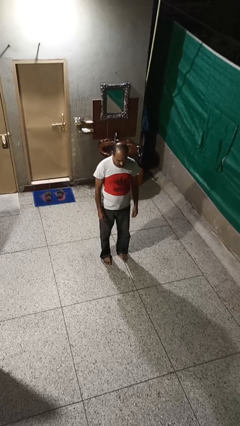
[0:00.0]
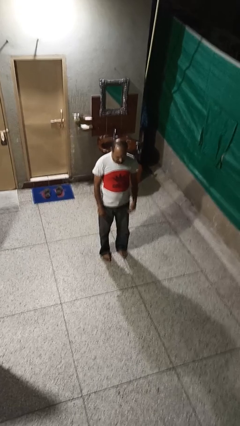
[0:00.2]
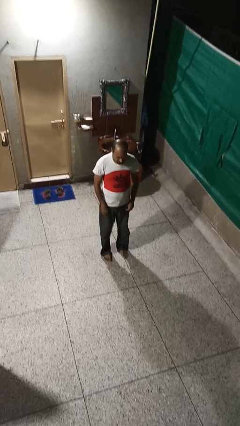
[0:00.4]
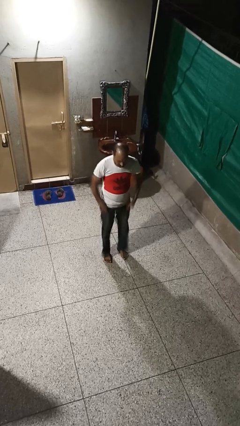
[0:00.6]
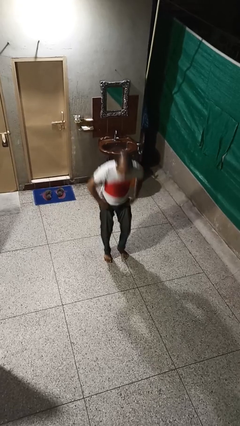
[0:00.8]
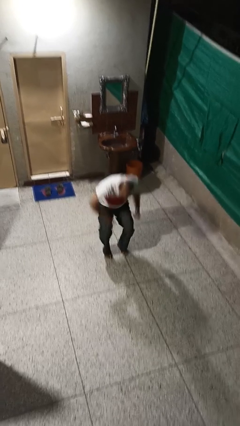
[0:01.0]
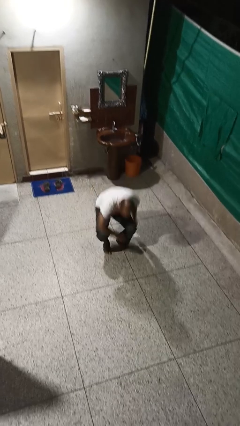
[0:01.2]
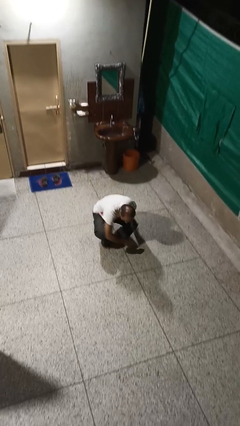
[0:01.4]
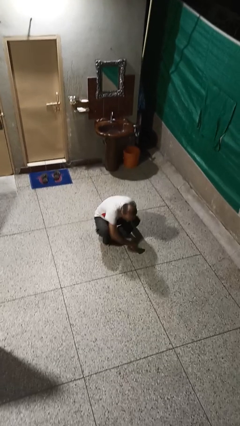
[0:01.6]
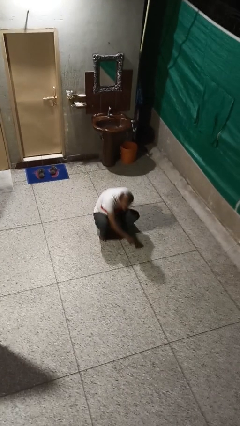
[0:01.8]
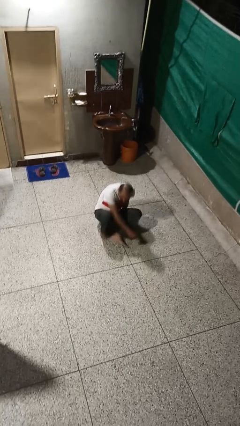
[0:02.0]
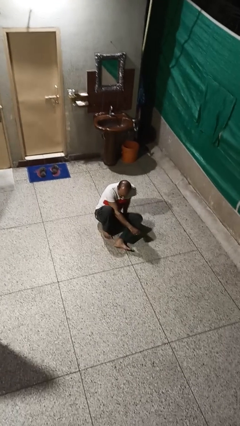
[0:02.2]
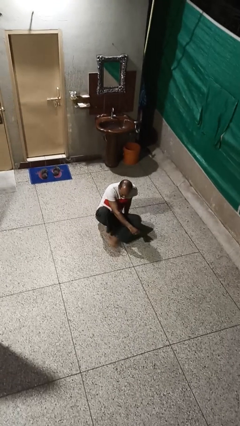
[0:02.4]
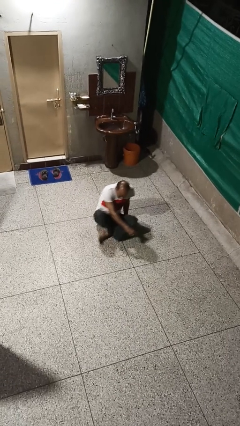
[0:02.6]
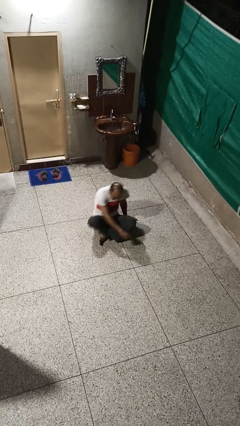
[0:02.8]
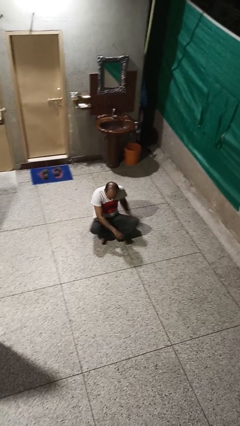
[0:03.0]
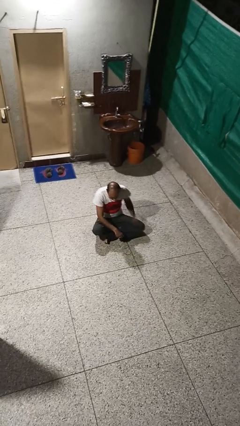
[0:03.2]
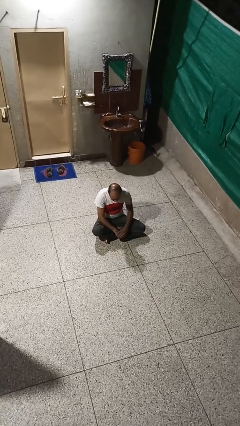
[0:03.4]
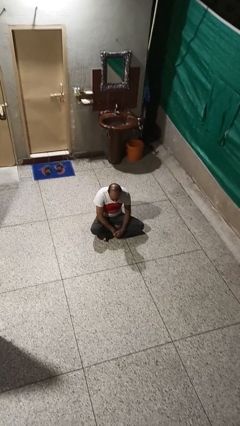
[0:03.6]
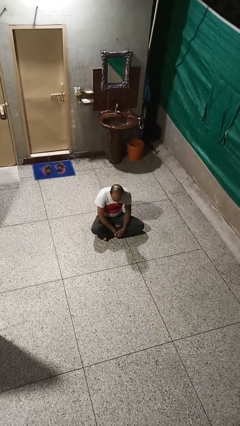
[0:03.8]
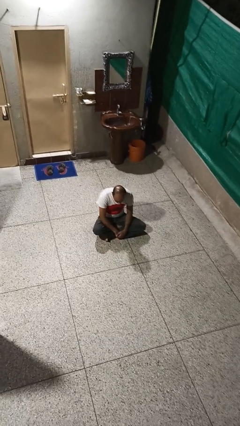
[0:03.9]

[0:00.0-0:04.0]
person sits crisscross

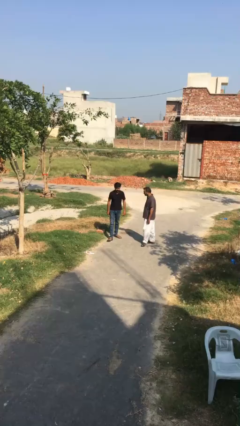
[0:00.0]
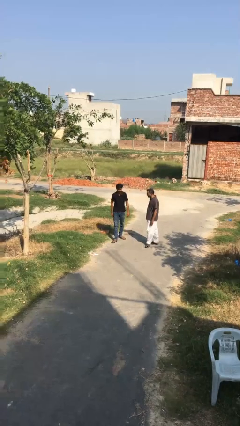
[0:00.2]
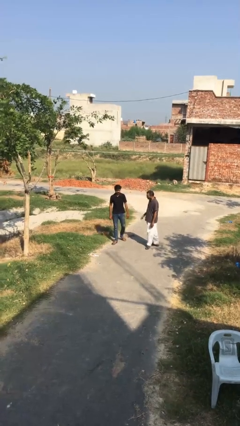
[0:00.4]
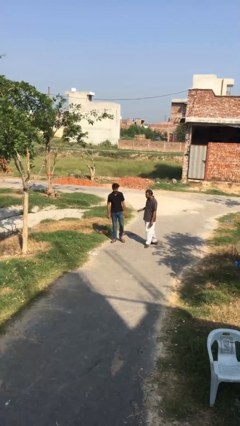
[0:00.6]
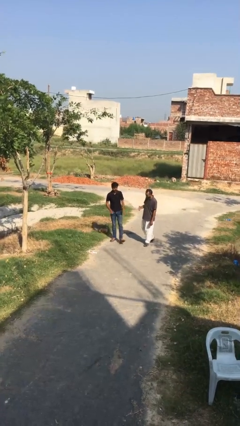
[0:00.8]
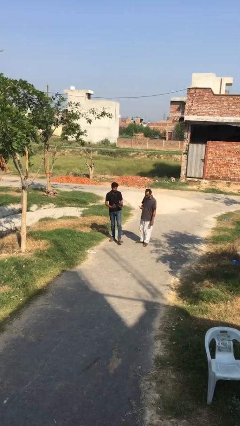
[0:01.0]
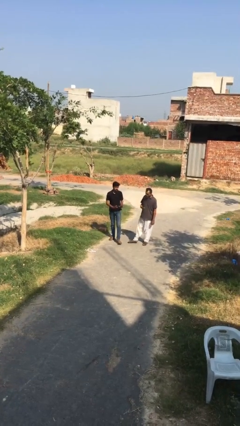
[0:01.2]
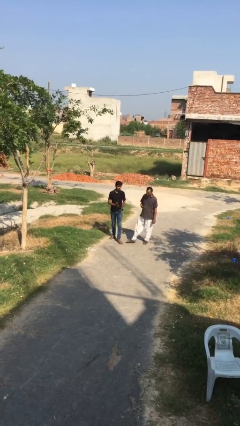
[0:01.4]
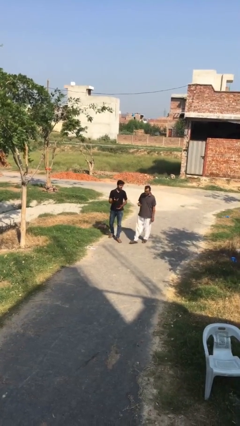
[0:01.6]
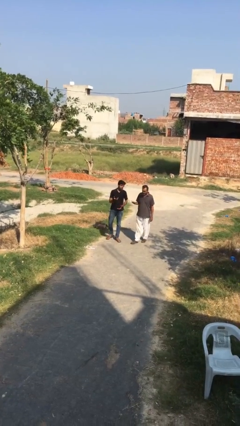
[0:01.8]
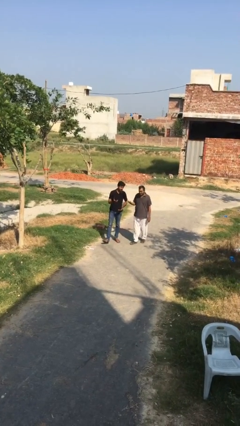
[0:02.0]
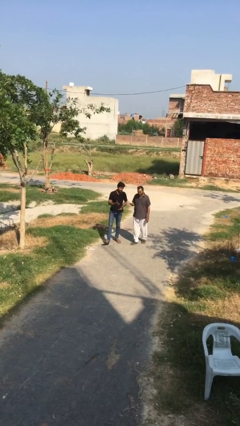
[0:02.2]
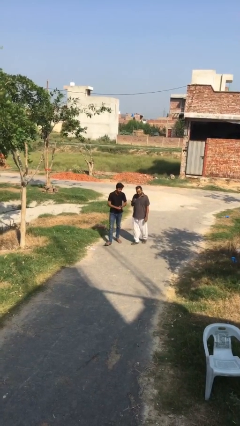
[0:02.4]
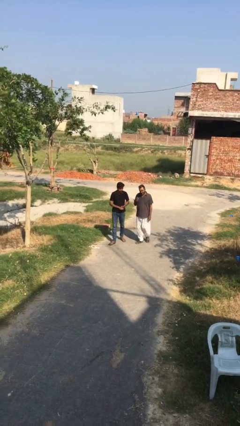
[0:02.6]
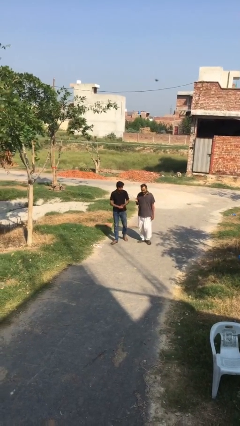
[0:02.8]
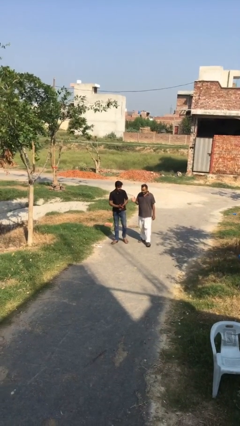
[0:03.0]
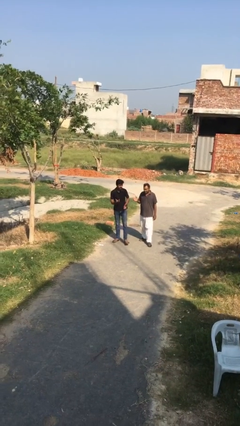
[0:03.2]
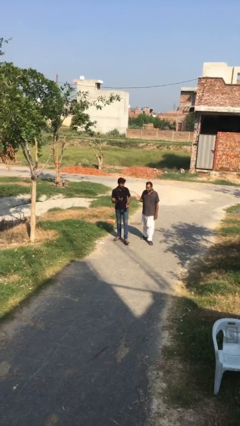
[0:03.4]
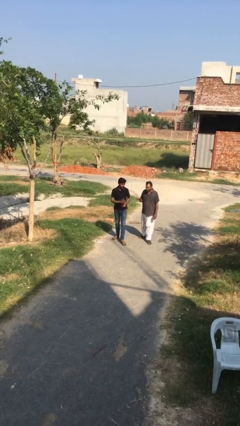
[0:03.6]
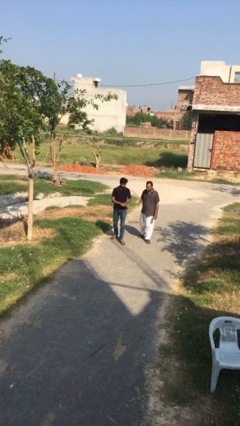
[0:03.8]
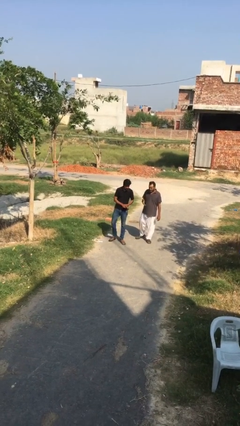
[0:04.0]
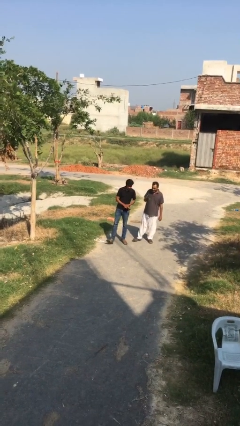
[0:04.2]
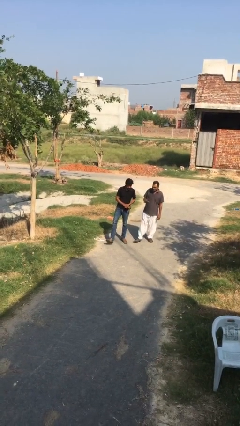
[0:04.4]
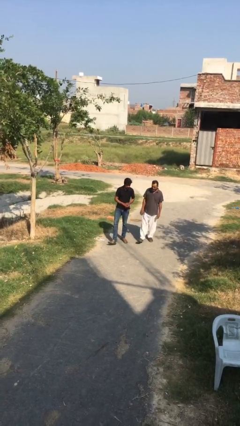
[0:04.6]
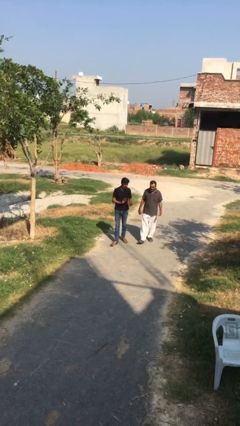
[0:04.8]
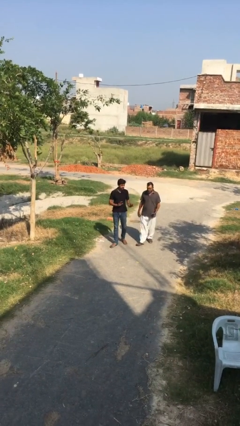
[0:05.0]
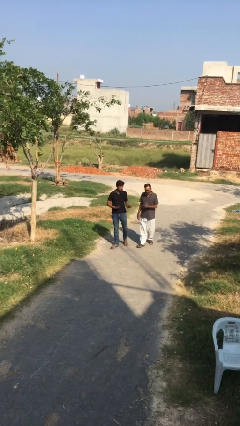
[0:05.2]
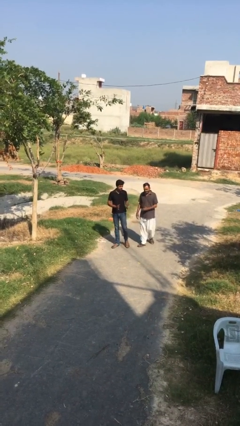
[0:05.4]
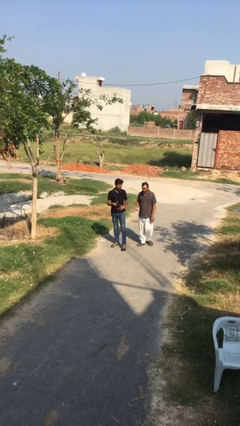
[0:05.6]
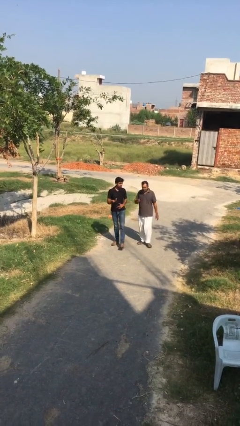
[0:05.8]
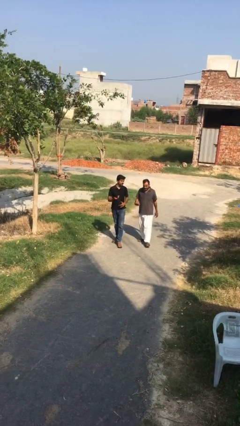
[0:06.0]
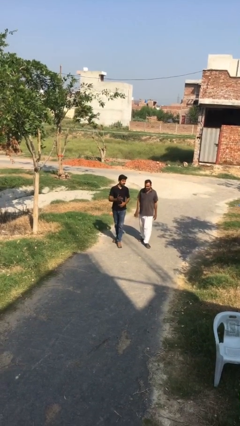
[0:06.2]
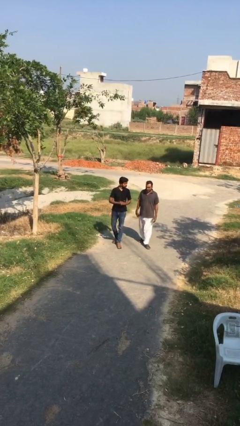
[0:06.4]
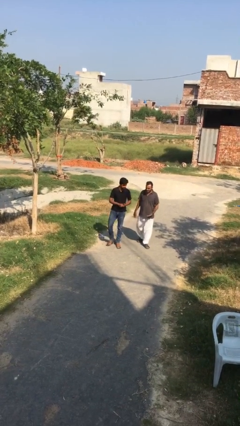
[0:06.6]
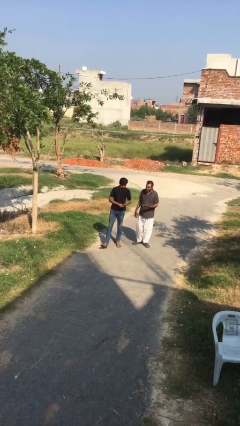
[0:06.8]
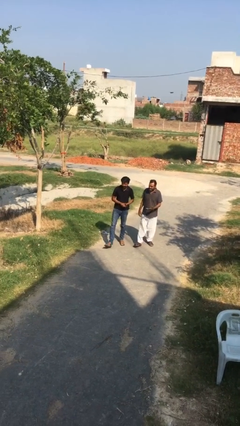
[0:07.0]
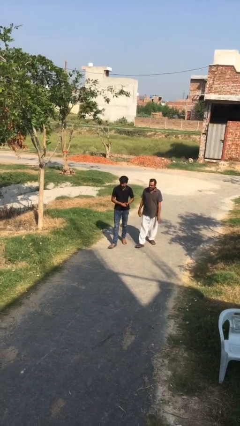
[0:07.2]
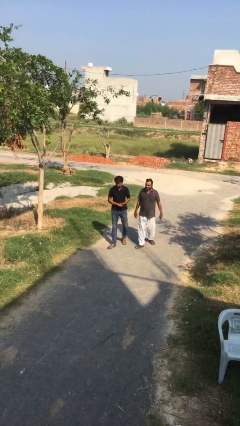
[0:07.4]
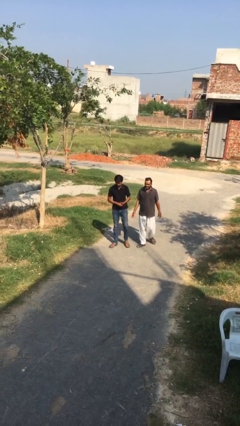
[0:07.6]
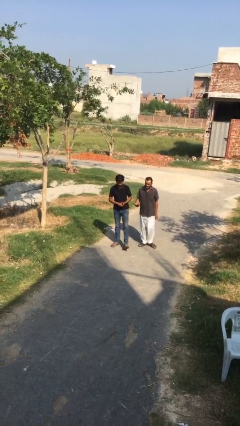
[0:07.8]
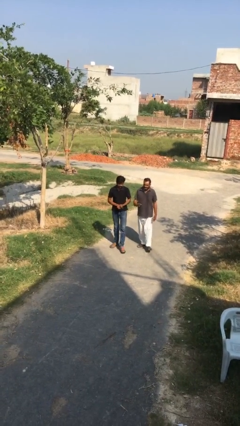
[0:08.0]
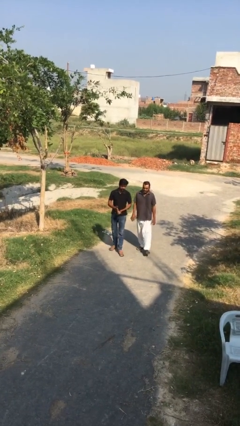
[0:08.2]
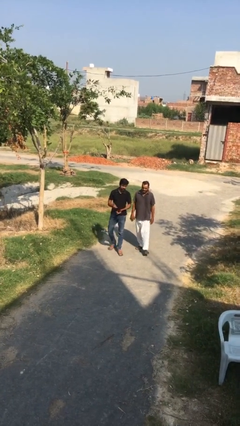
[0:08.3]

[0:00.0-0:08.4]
person talks to person

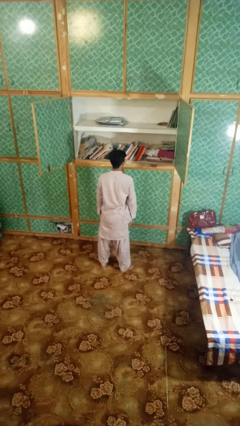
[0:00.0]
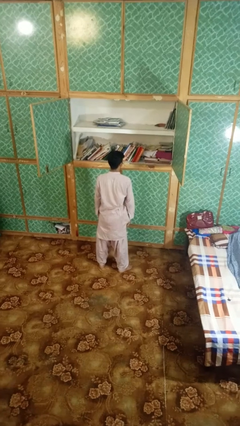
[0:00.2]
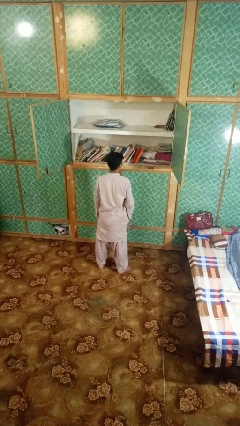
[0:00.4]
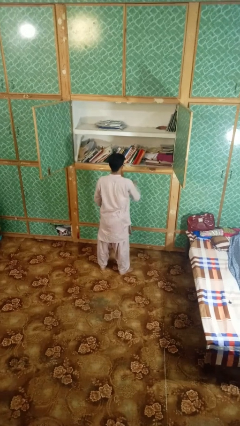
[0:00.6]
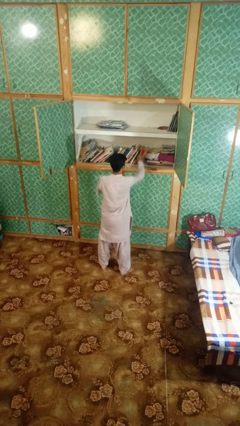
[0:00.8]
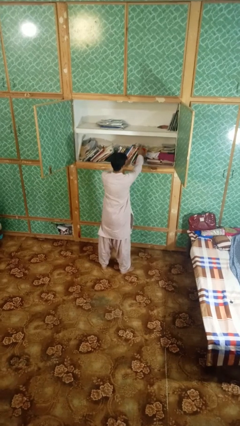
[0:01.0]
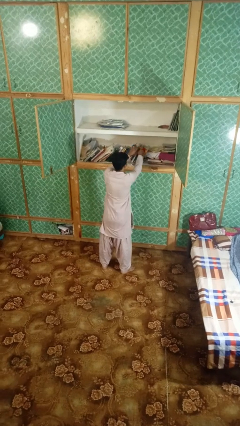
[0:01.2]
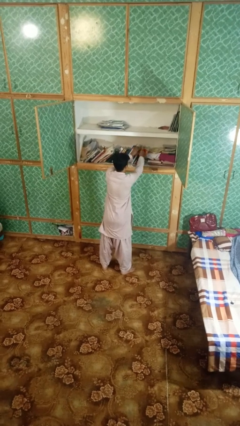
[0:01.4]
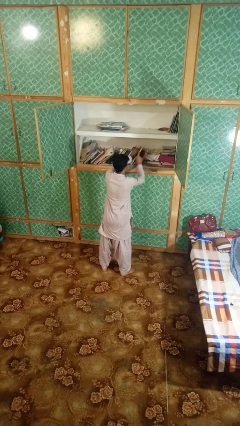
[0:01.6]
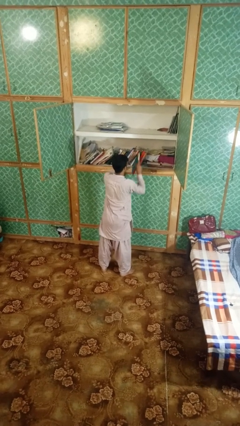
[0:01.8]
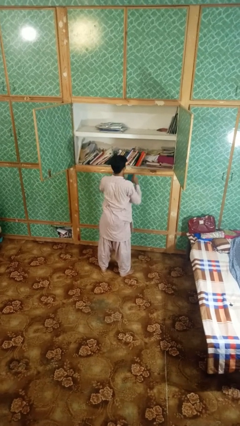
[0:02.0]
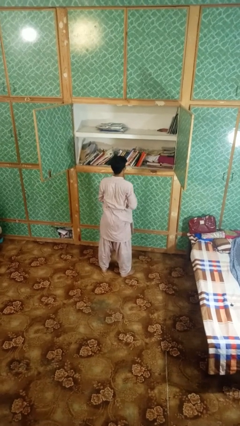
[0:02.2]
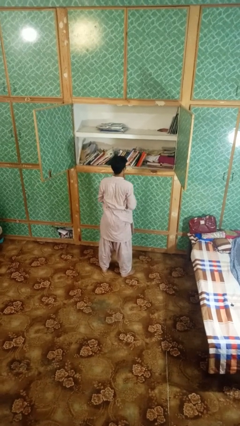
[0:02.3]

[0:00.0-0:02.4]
person picks up object from shelf

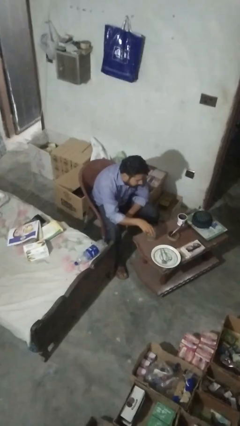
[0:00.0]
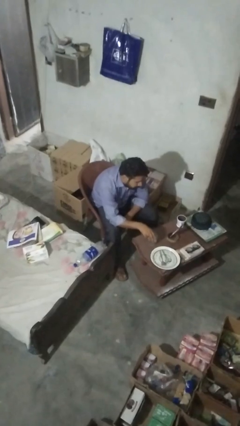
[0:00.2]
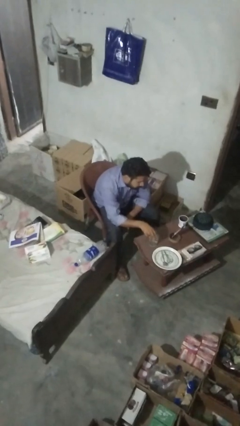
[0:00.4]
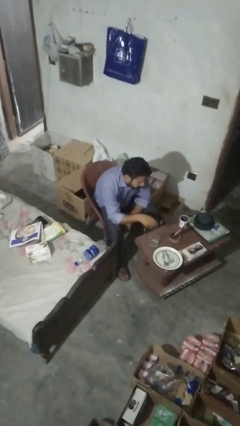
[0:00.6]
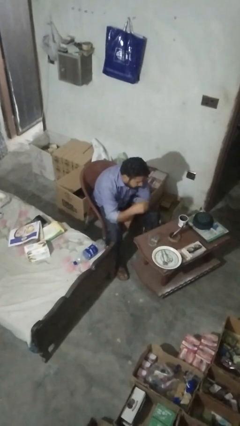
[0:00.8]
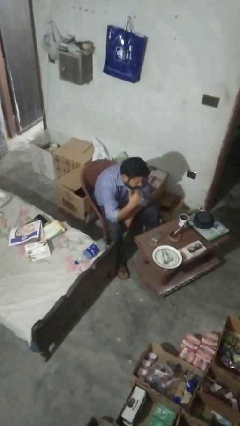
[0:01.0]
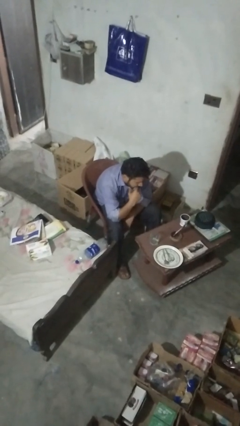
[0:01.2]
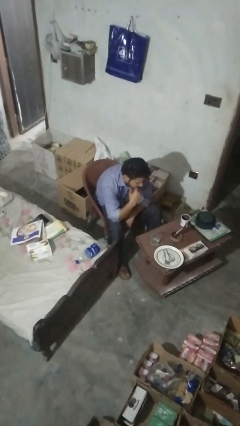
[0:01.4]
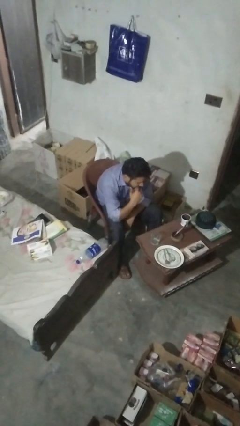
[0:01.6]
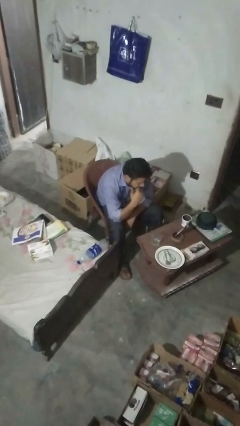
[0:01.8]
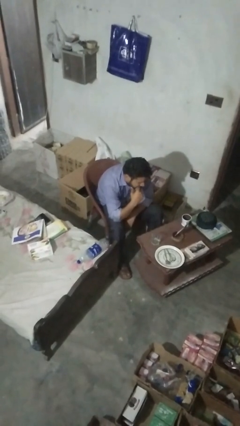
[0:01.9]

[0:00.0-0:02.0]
person puts down object on table

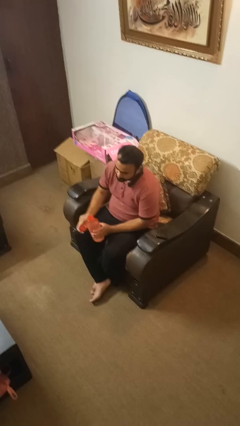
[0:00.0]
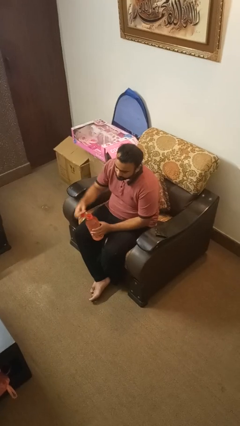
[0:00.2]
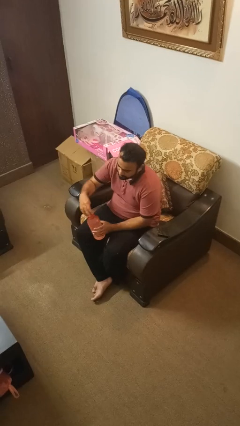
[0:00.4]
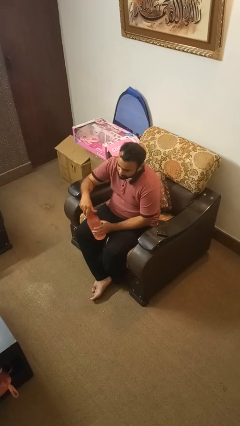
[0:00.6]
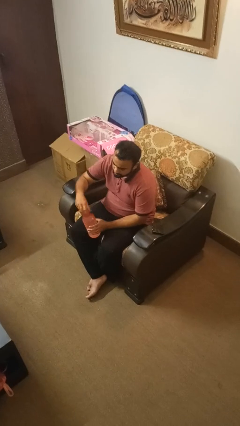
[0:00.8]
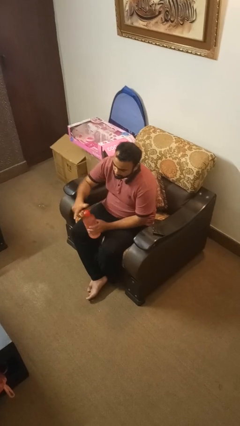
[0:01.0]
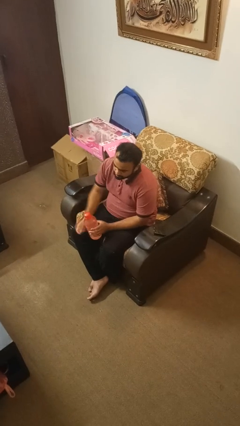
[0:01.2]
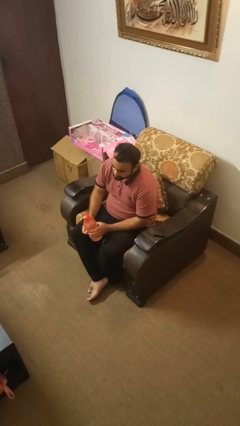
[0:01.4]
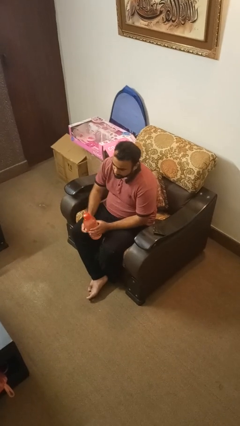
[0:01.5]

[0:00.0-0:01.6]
person screws lid to bottle
